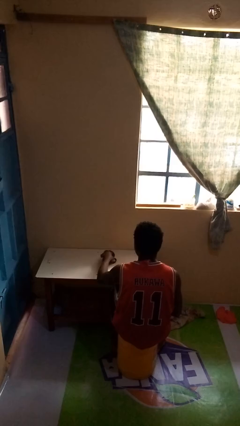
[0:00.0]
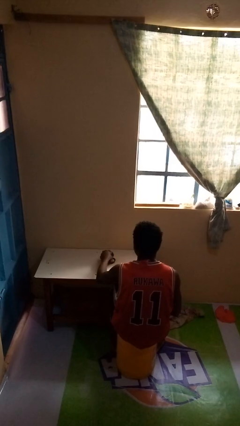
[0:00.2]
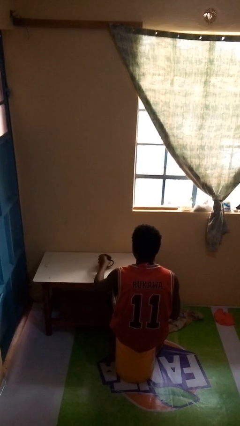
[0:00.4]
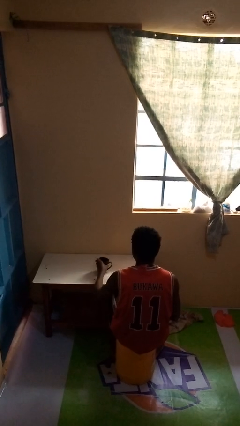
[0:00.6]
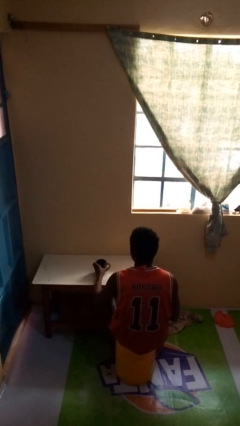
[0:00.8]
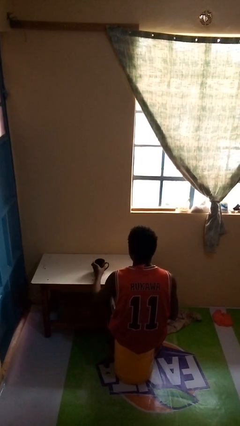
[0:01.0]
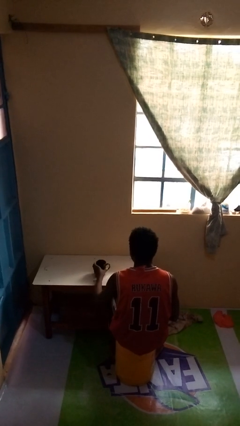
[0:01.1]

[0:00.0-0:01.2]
person sets upright glass

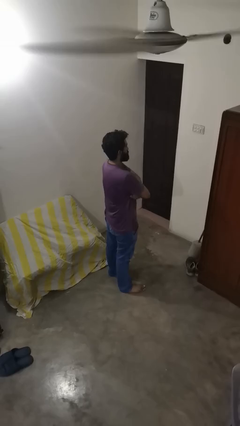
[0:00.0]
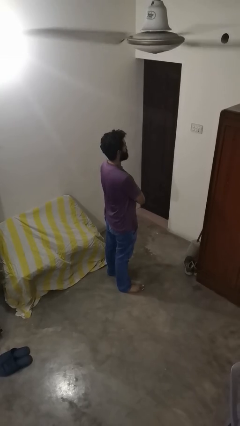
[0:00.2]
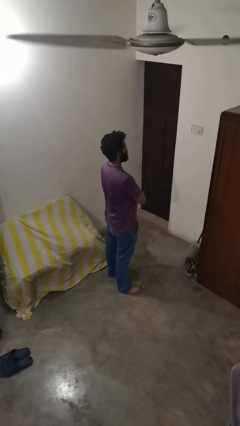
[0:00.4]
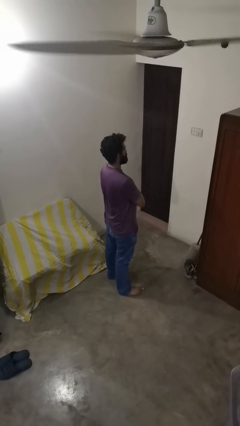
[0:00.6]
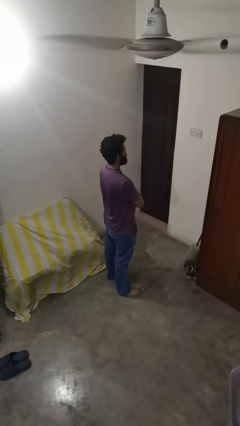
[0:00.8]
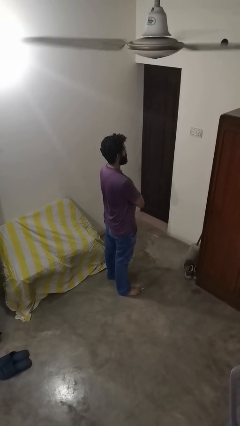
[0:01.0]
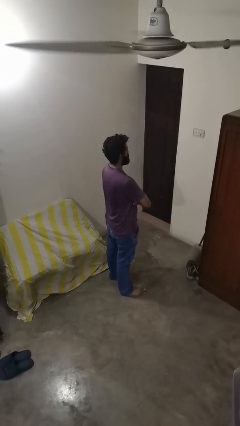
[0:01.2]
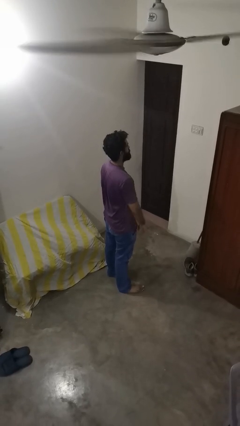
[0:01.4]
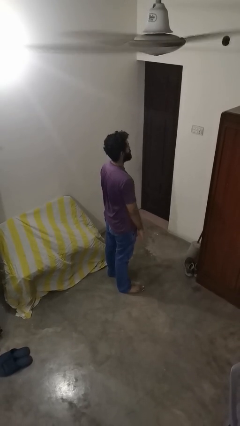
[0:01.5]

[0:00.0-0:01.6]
person crosses arms

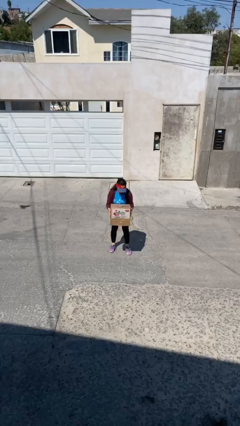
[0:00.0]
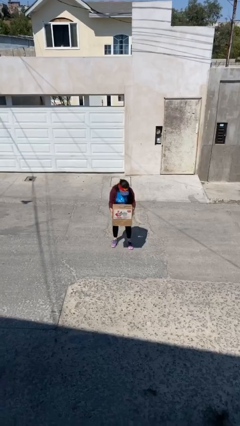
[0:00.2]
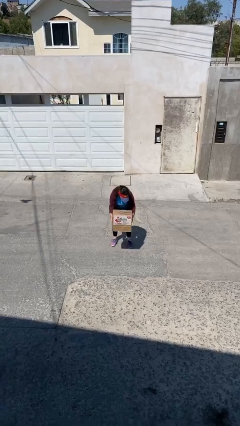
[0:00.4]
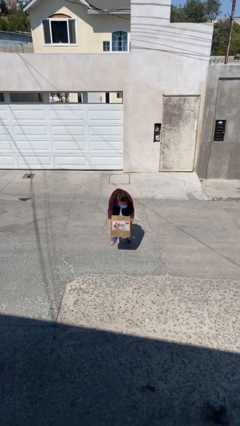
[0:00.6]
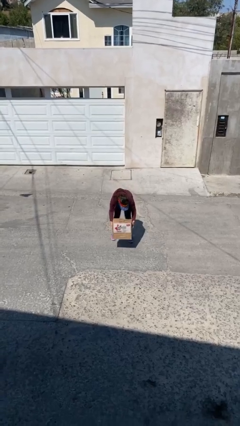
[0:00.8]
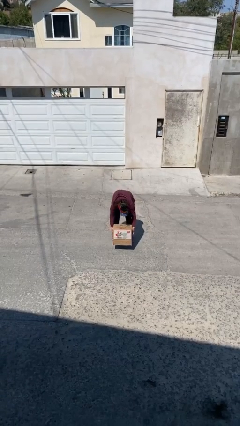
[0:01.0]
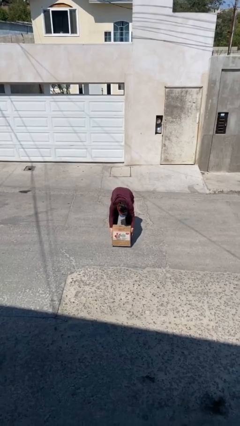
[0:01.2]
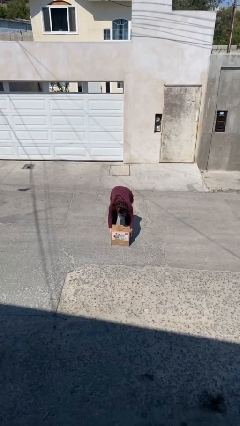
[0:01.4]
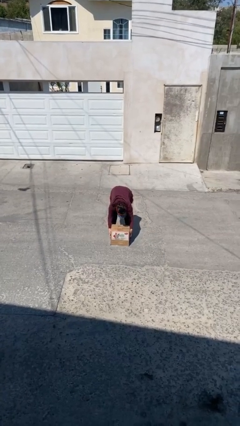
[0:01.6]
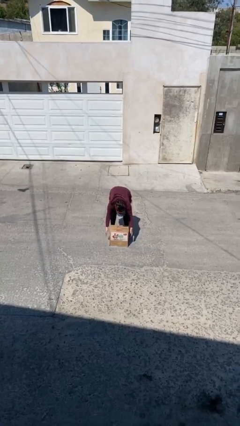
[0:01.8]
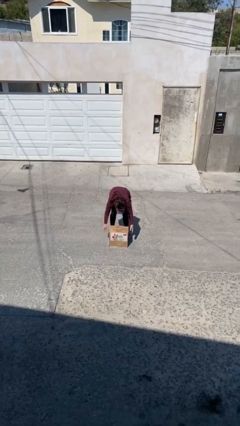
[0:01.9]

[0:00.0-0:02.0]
person puts down object on floor

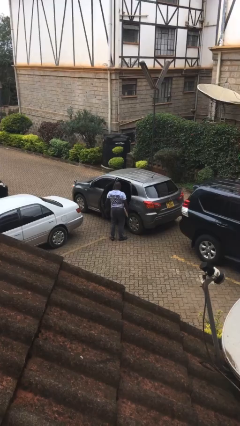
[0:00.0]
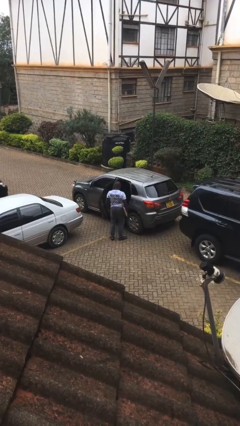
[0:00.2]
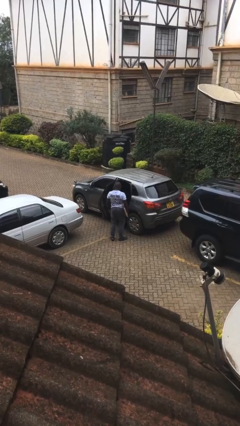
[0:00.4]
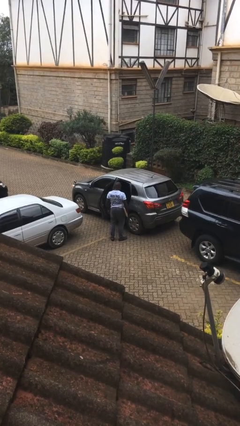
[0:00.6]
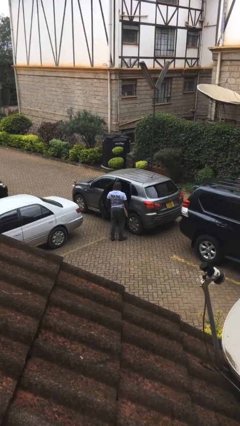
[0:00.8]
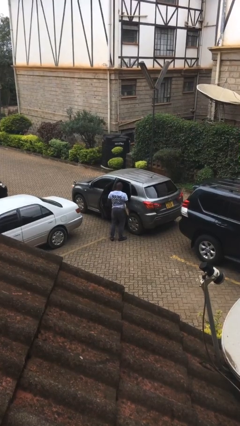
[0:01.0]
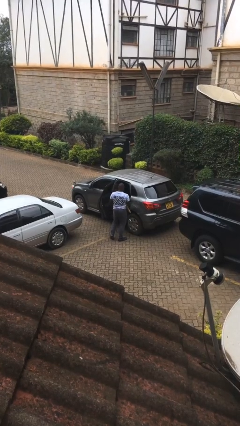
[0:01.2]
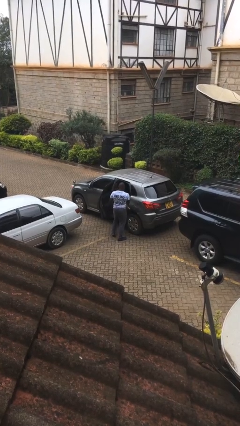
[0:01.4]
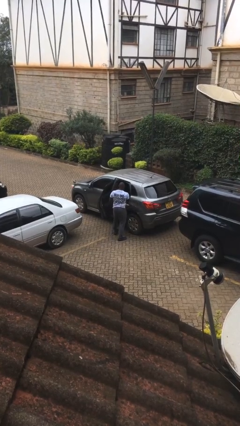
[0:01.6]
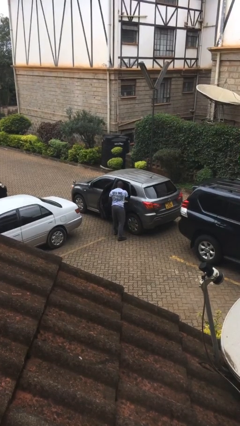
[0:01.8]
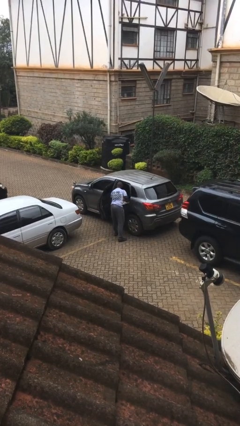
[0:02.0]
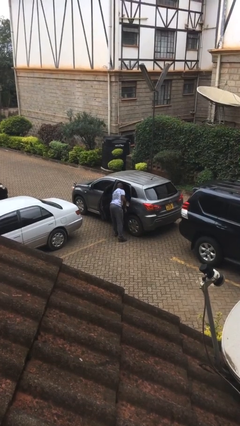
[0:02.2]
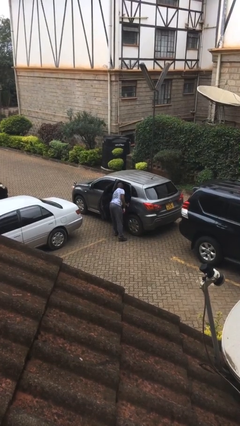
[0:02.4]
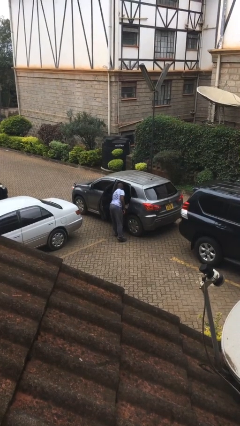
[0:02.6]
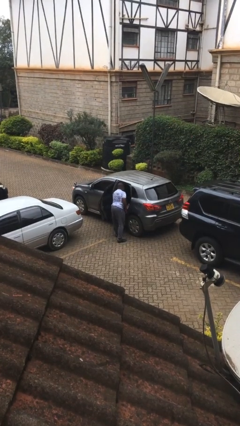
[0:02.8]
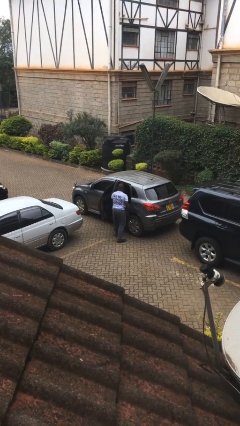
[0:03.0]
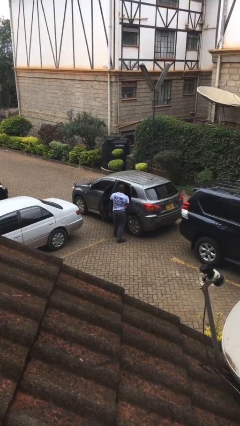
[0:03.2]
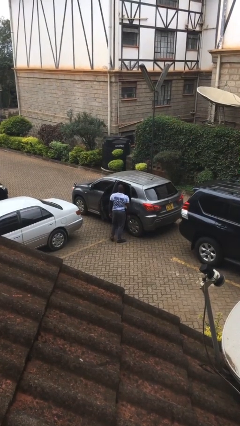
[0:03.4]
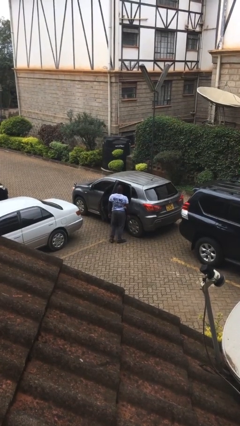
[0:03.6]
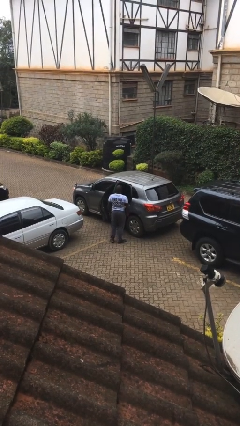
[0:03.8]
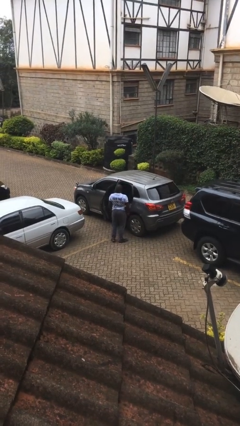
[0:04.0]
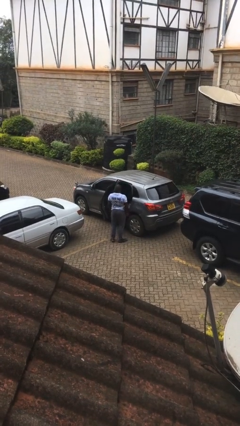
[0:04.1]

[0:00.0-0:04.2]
person loads car

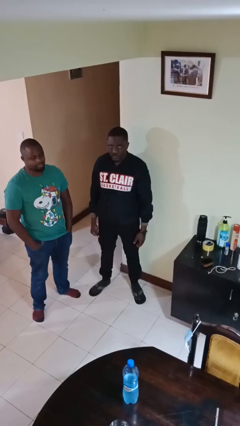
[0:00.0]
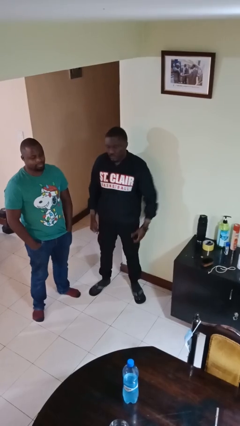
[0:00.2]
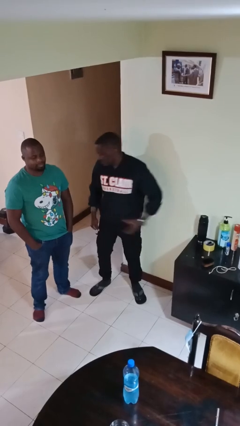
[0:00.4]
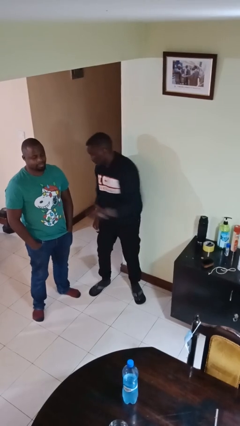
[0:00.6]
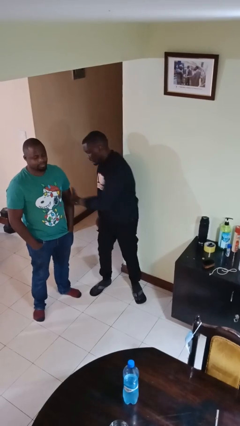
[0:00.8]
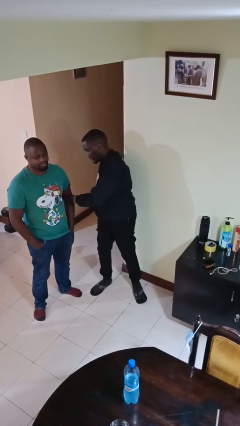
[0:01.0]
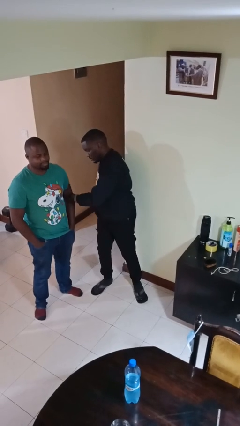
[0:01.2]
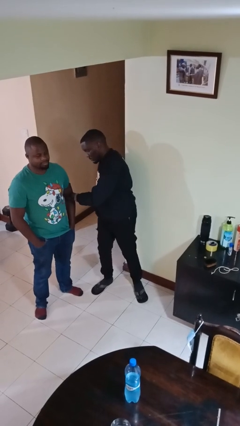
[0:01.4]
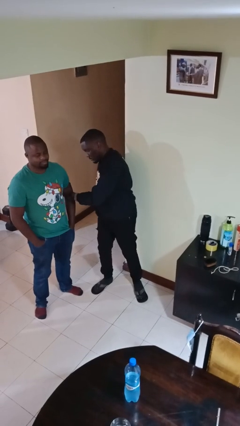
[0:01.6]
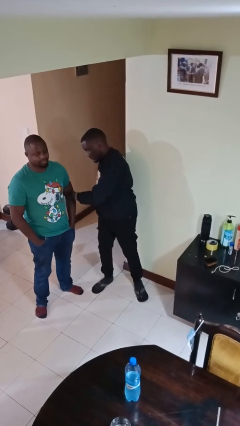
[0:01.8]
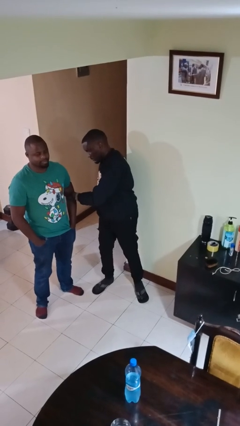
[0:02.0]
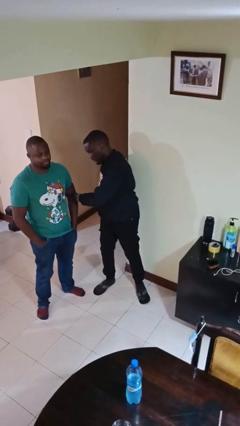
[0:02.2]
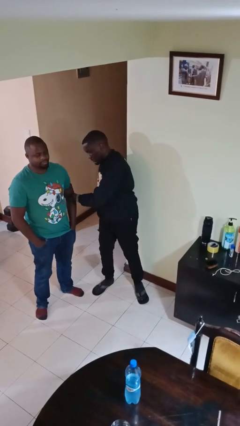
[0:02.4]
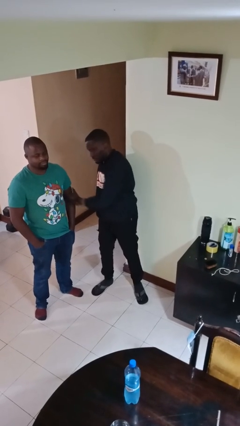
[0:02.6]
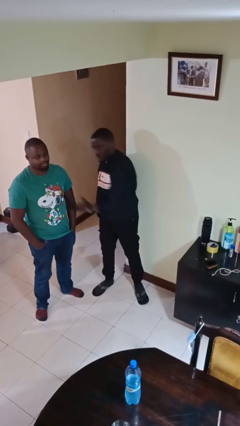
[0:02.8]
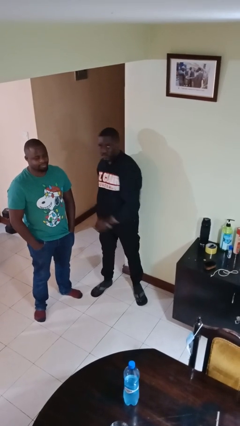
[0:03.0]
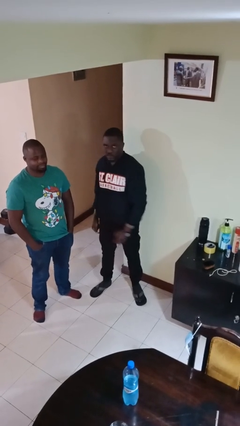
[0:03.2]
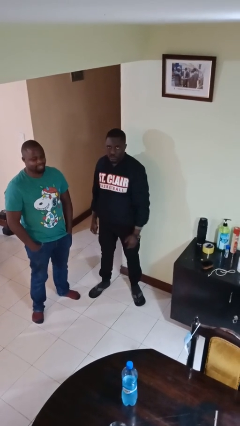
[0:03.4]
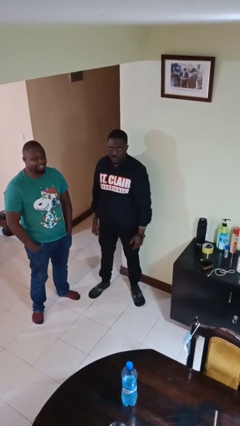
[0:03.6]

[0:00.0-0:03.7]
person grabs person by bicep

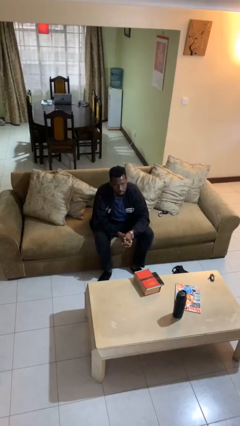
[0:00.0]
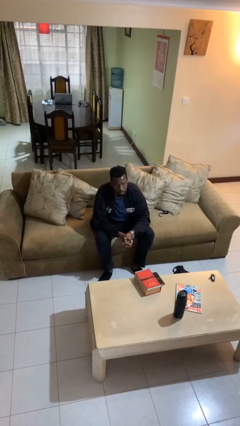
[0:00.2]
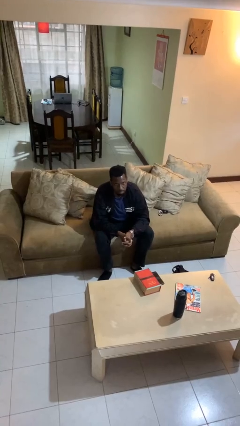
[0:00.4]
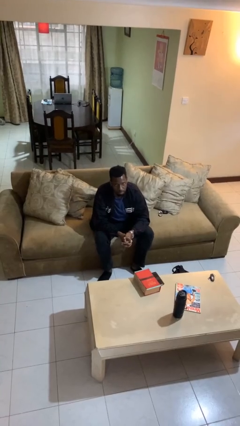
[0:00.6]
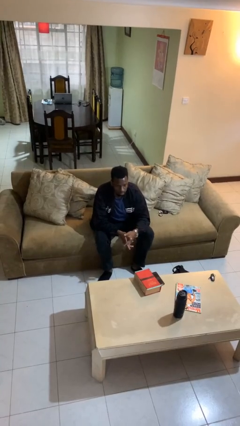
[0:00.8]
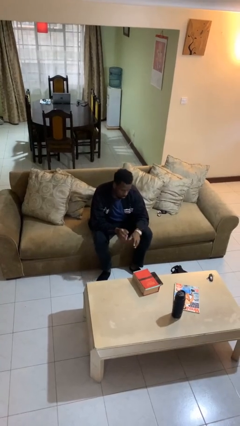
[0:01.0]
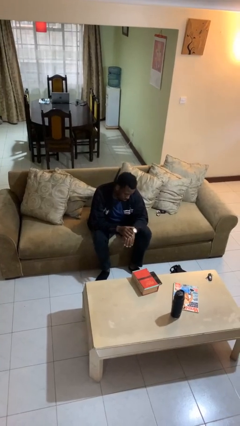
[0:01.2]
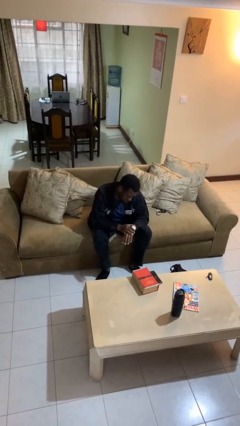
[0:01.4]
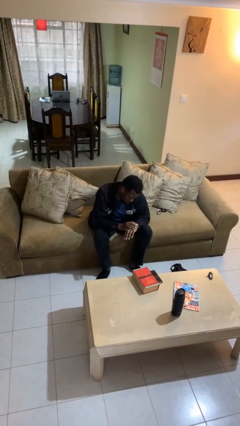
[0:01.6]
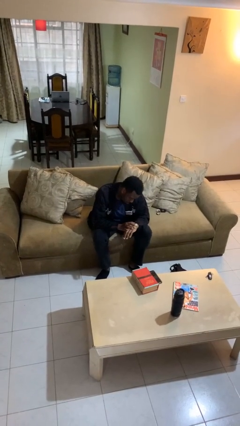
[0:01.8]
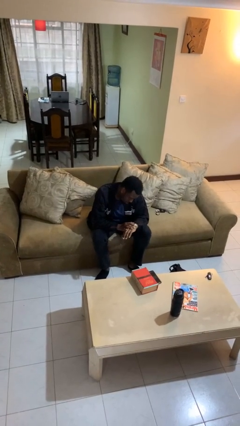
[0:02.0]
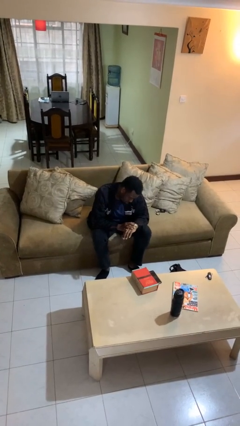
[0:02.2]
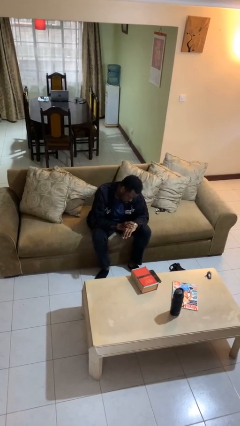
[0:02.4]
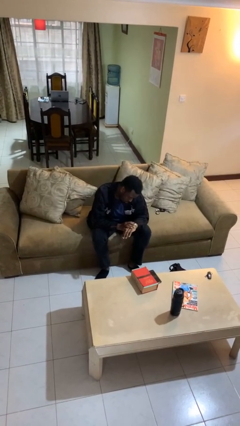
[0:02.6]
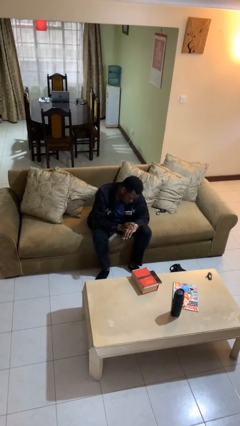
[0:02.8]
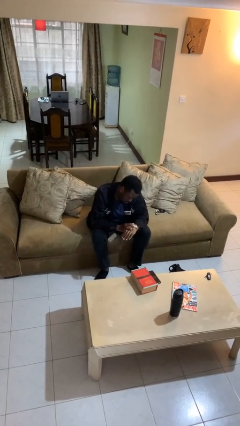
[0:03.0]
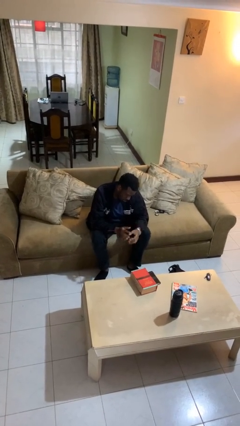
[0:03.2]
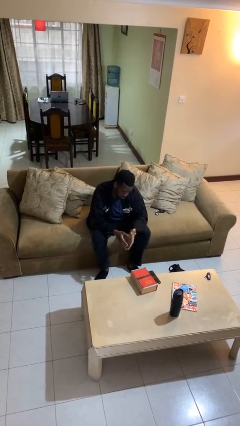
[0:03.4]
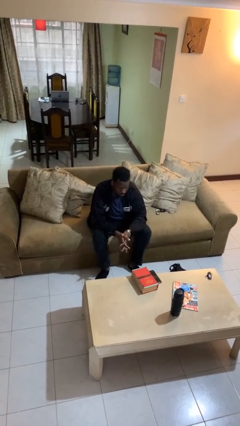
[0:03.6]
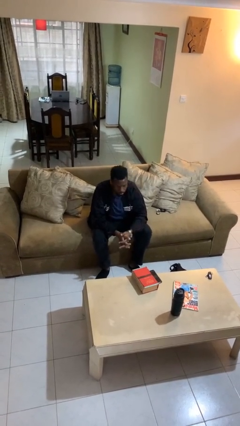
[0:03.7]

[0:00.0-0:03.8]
person looks at wristwatch

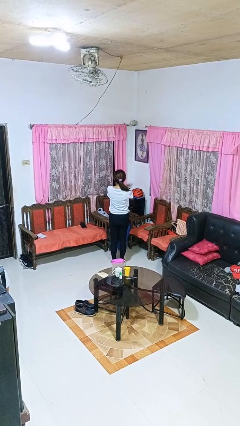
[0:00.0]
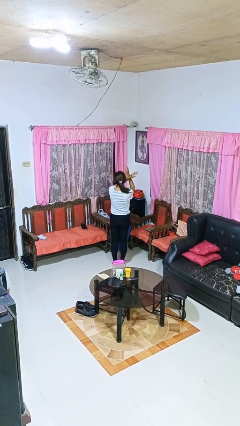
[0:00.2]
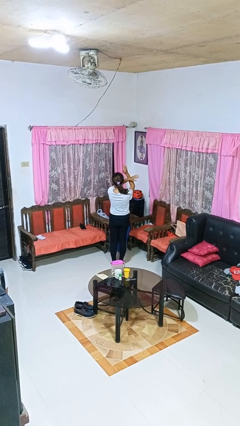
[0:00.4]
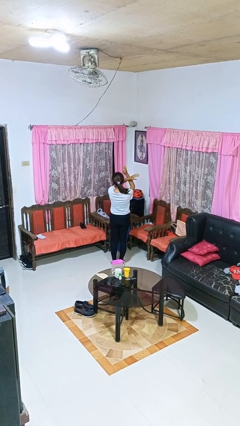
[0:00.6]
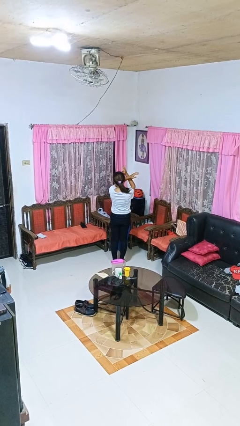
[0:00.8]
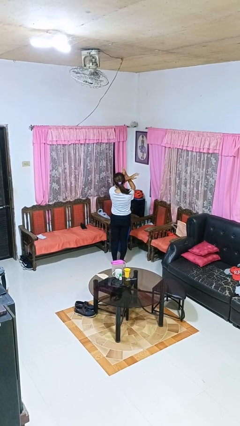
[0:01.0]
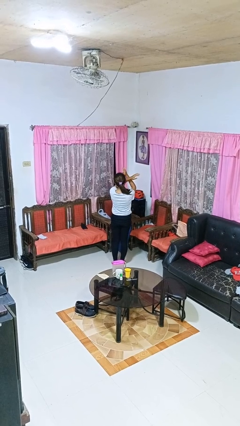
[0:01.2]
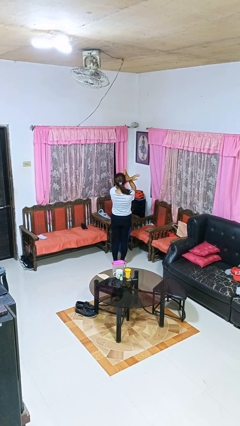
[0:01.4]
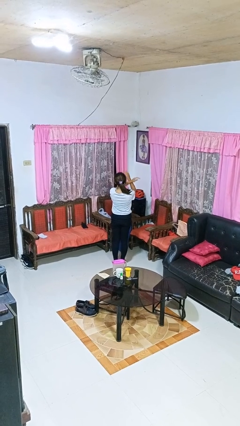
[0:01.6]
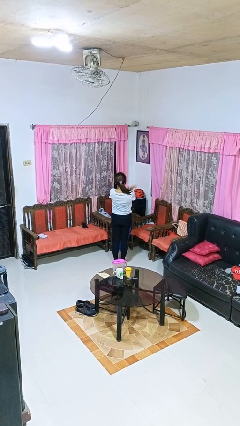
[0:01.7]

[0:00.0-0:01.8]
person gestures arms x
